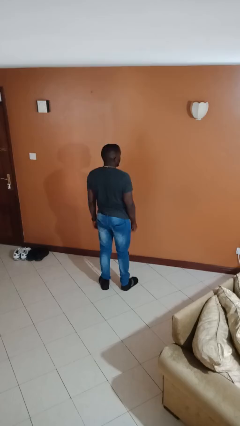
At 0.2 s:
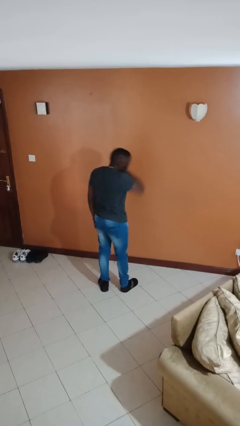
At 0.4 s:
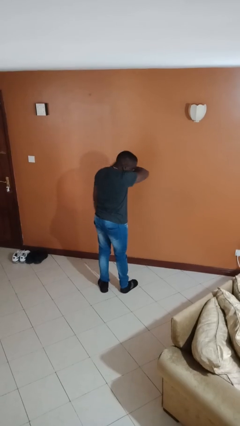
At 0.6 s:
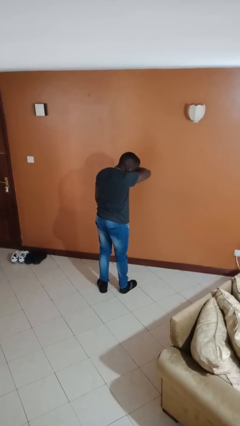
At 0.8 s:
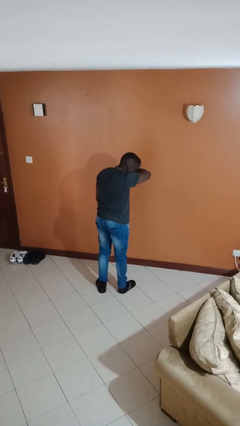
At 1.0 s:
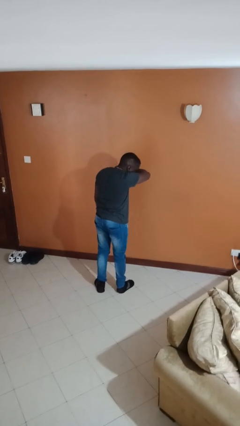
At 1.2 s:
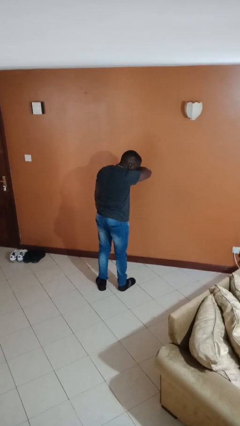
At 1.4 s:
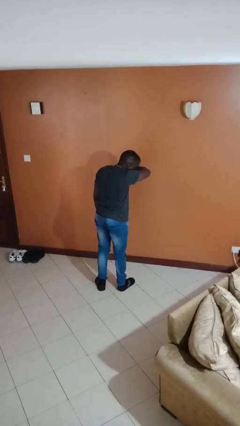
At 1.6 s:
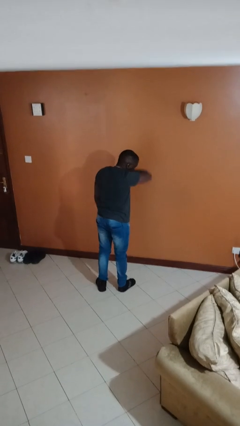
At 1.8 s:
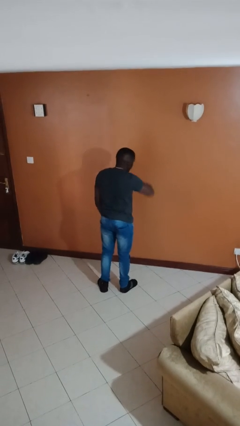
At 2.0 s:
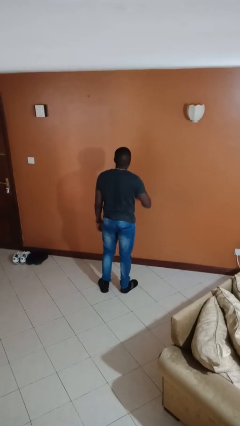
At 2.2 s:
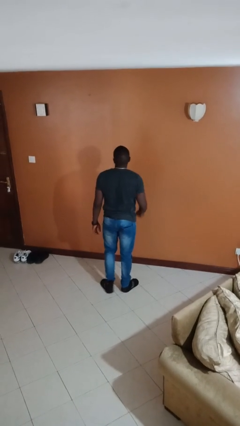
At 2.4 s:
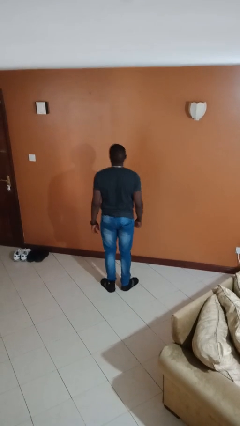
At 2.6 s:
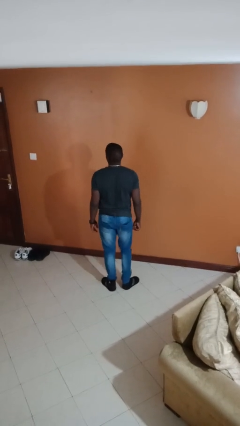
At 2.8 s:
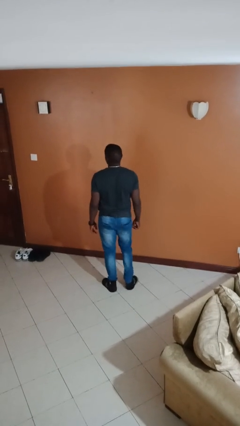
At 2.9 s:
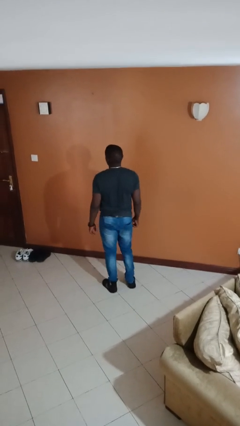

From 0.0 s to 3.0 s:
person sneezes into arm

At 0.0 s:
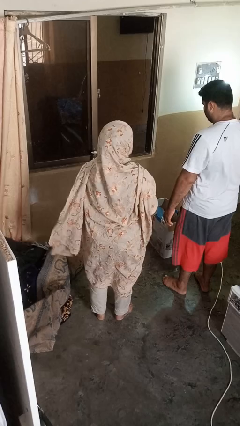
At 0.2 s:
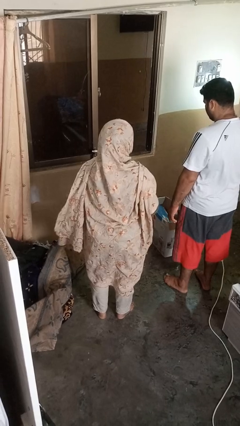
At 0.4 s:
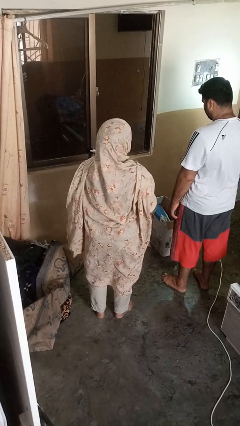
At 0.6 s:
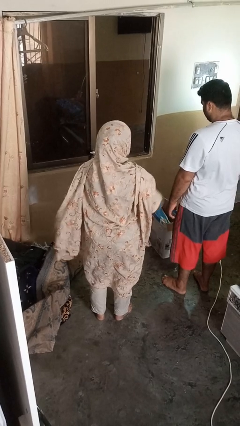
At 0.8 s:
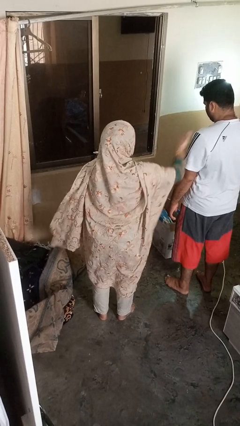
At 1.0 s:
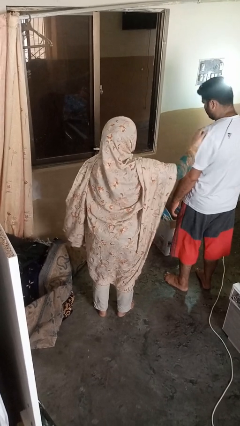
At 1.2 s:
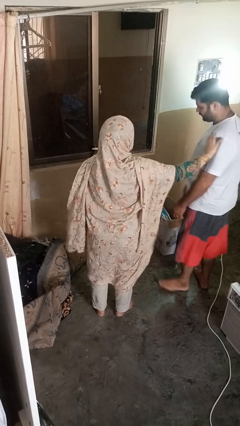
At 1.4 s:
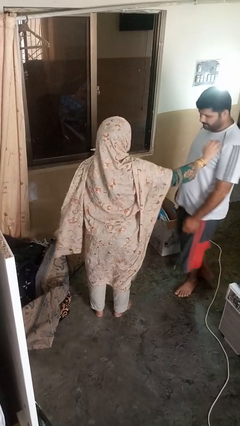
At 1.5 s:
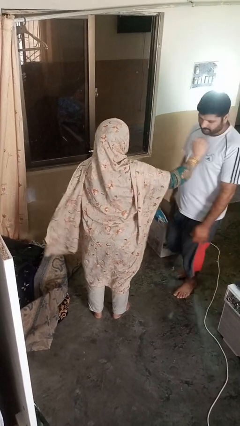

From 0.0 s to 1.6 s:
person grabs person by shoulder

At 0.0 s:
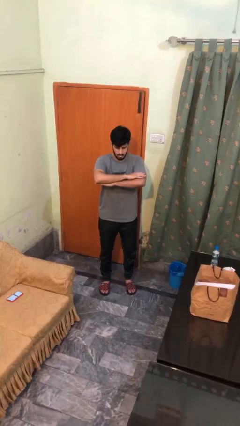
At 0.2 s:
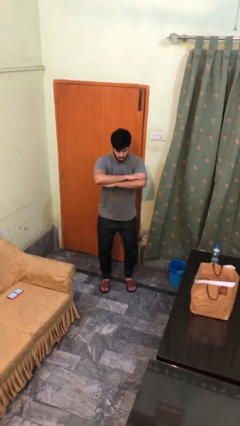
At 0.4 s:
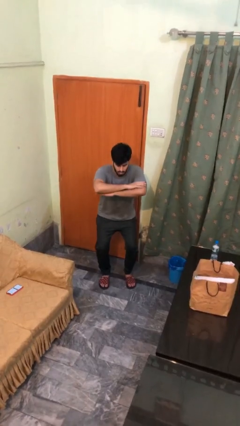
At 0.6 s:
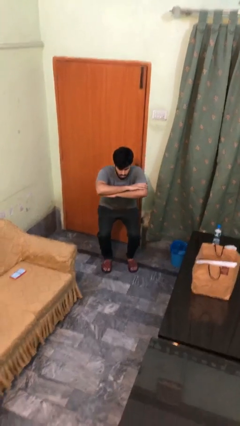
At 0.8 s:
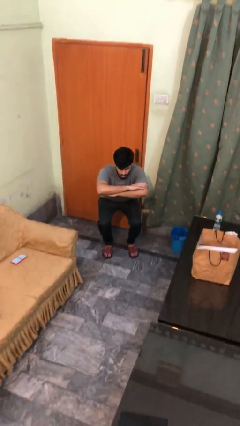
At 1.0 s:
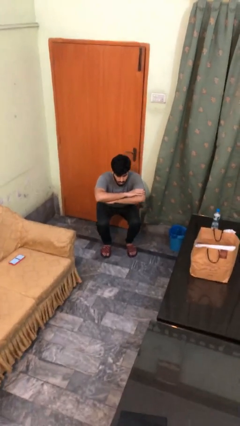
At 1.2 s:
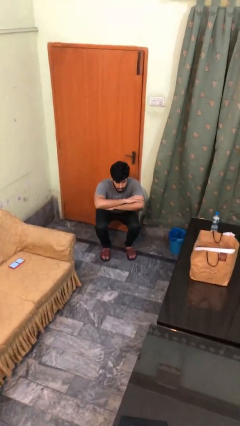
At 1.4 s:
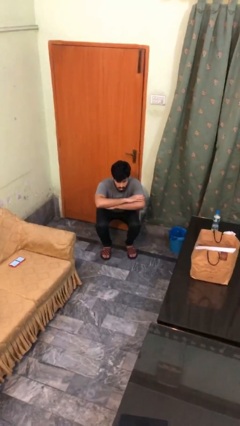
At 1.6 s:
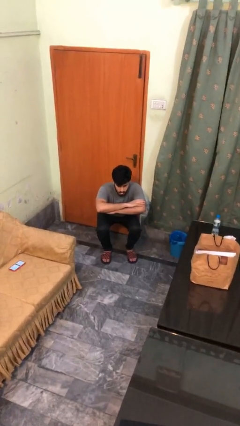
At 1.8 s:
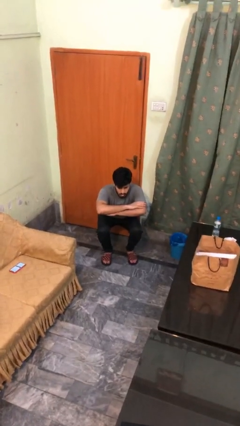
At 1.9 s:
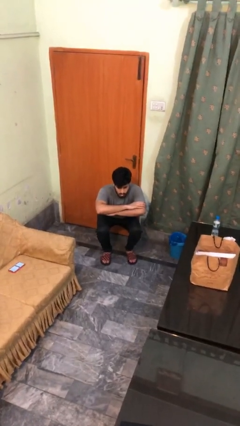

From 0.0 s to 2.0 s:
person squats

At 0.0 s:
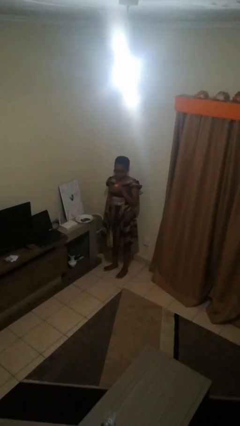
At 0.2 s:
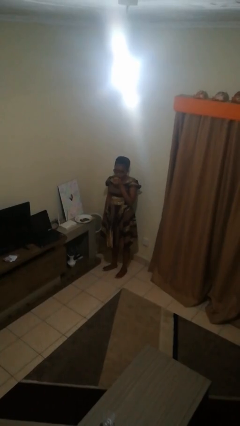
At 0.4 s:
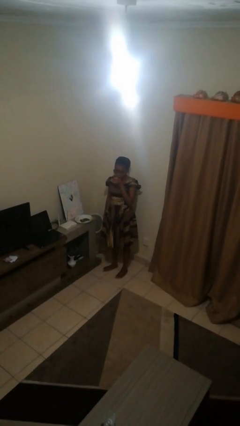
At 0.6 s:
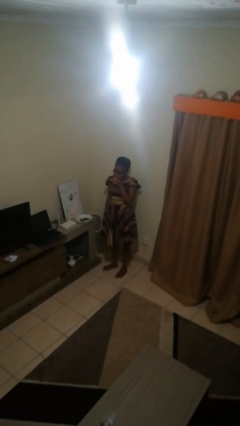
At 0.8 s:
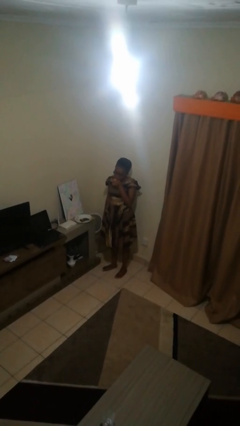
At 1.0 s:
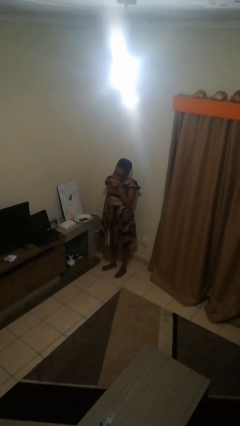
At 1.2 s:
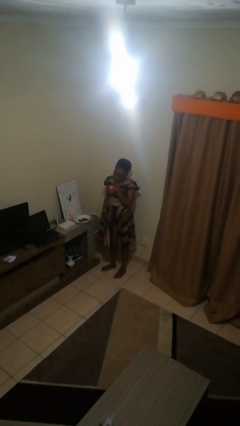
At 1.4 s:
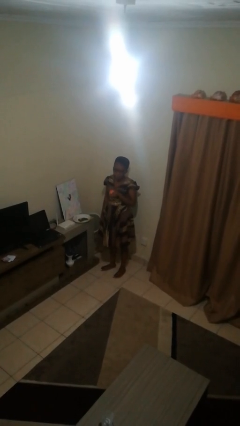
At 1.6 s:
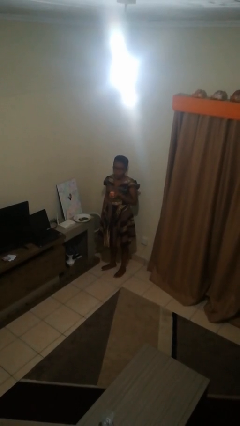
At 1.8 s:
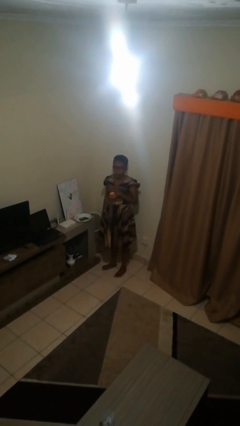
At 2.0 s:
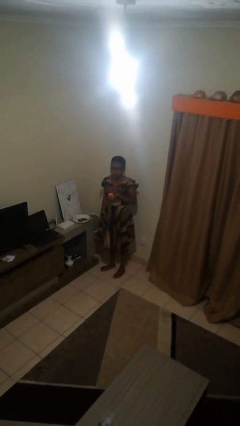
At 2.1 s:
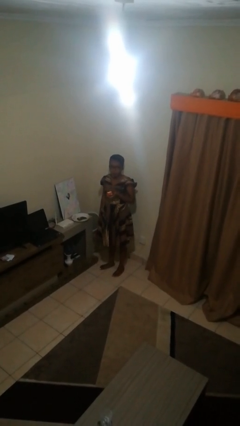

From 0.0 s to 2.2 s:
person eats apple

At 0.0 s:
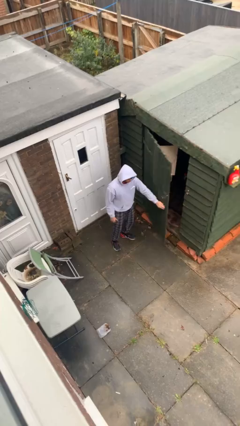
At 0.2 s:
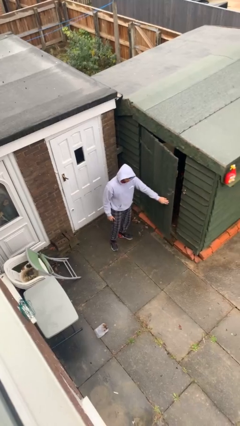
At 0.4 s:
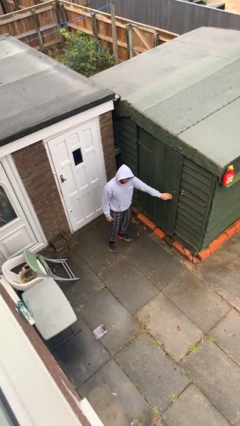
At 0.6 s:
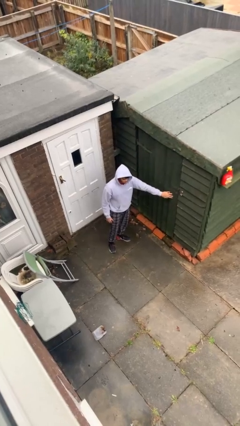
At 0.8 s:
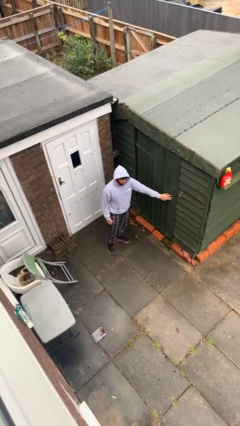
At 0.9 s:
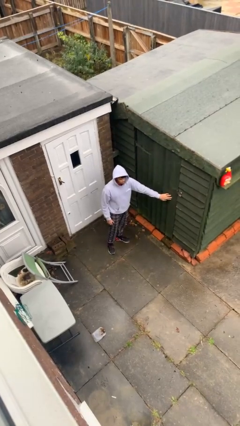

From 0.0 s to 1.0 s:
person closes facility door

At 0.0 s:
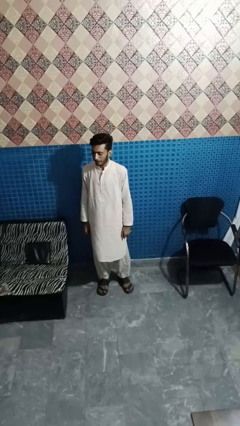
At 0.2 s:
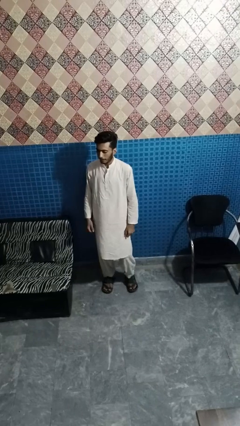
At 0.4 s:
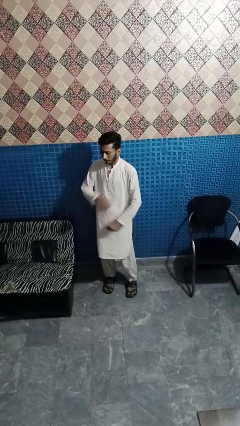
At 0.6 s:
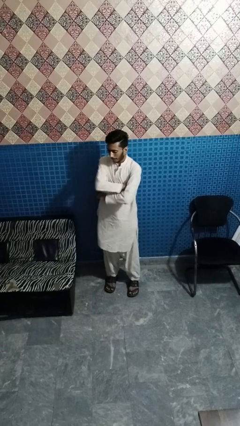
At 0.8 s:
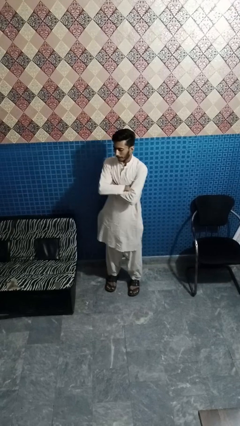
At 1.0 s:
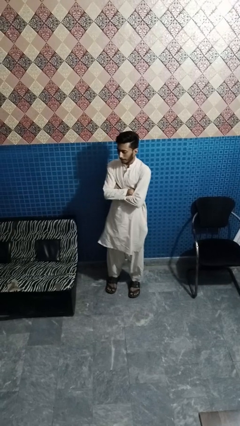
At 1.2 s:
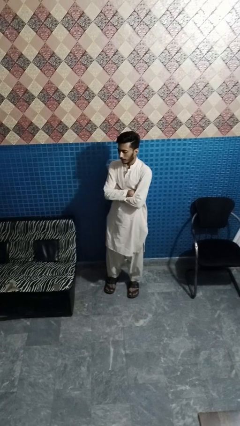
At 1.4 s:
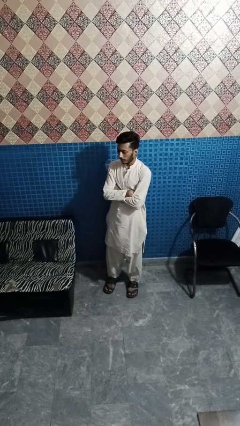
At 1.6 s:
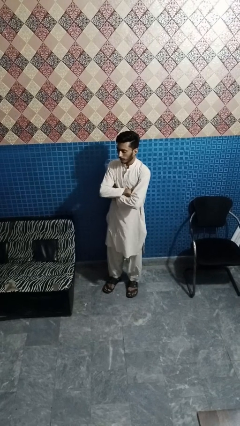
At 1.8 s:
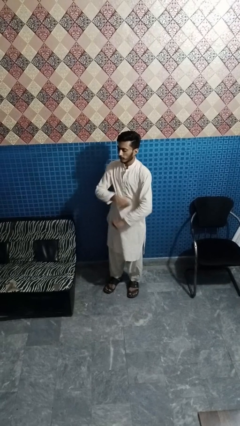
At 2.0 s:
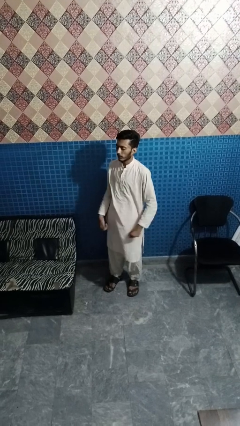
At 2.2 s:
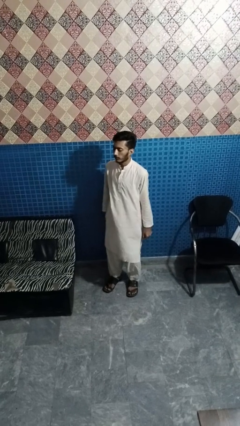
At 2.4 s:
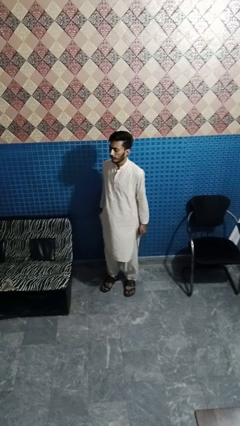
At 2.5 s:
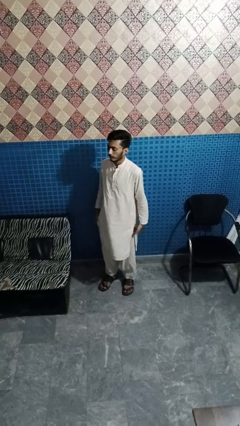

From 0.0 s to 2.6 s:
person crosses arms

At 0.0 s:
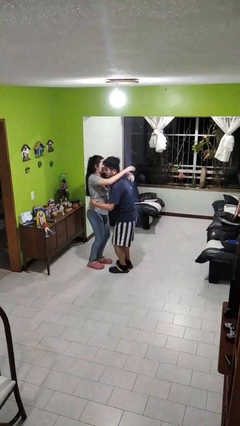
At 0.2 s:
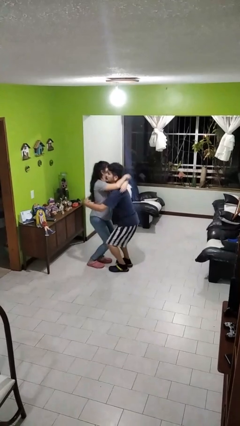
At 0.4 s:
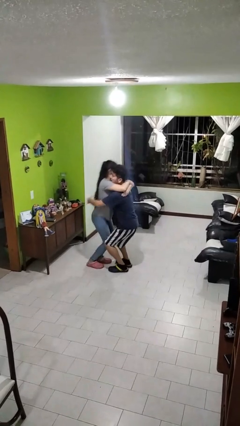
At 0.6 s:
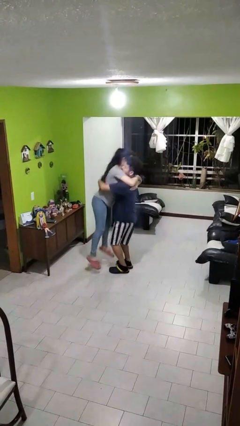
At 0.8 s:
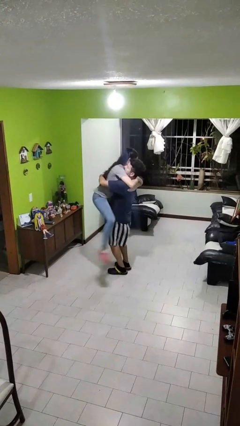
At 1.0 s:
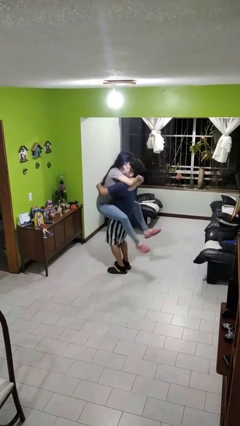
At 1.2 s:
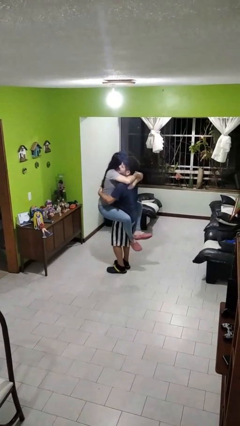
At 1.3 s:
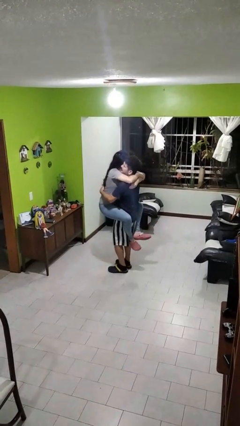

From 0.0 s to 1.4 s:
person picks up person

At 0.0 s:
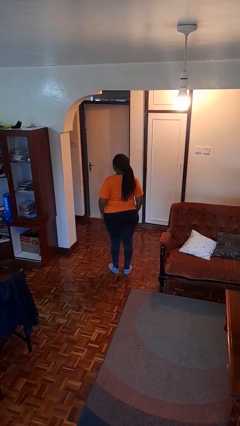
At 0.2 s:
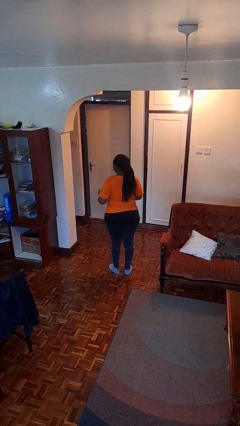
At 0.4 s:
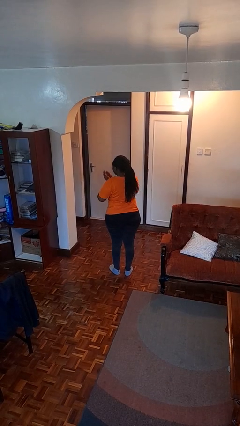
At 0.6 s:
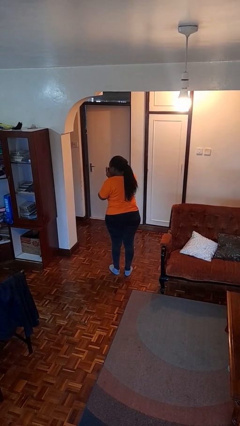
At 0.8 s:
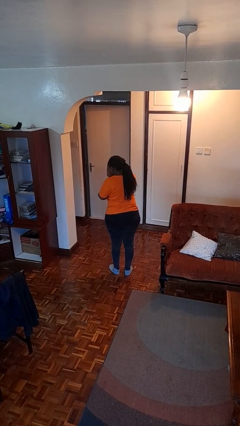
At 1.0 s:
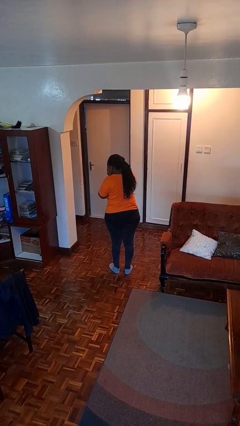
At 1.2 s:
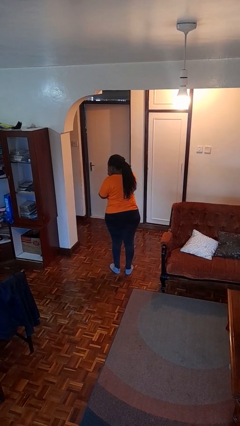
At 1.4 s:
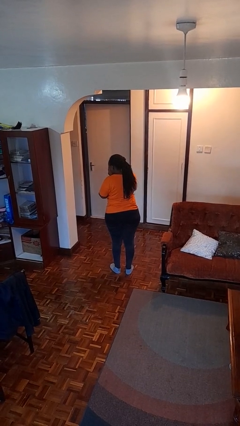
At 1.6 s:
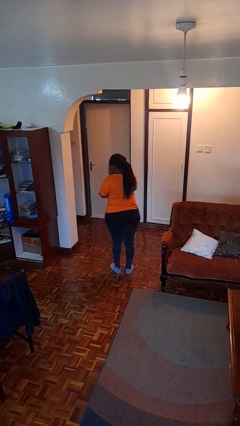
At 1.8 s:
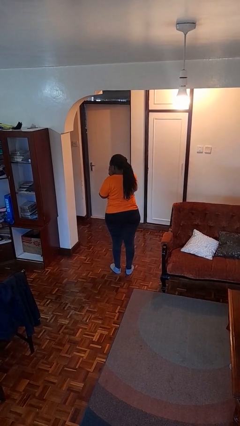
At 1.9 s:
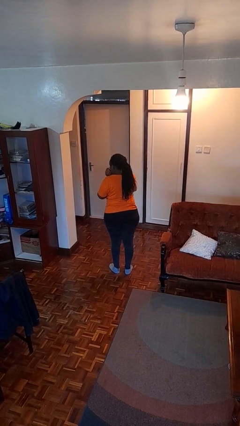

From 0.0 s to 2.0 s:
person sneezes into hand

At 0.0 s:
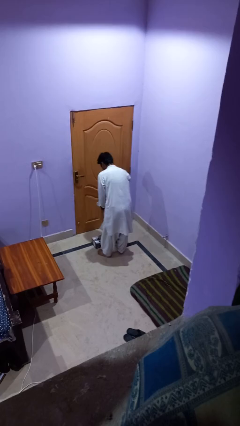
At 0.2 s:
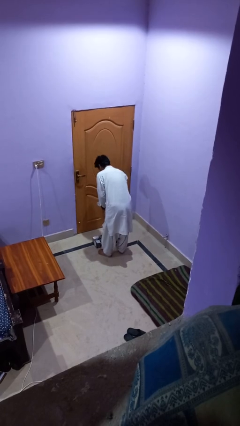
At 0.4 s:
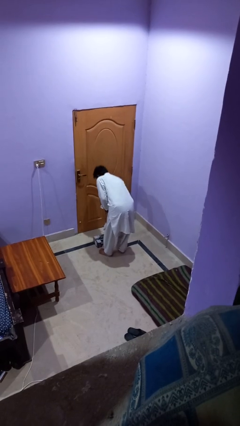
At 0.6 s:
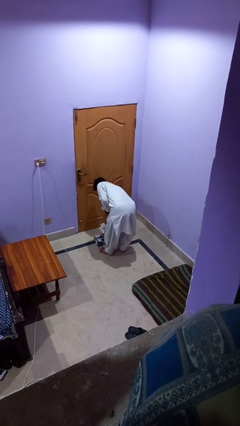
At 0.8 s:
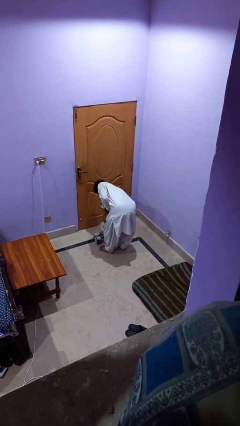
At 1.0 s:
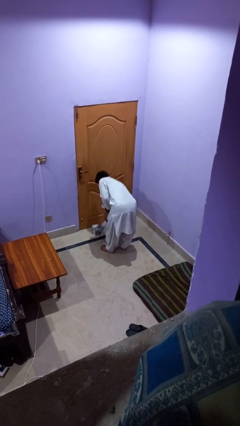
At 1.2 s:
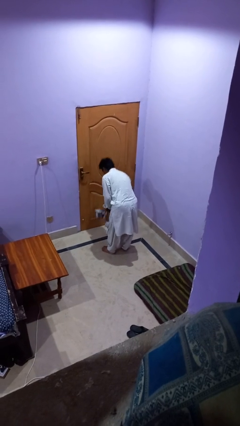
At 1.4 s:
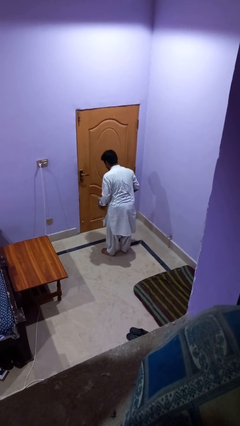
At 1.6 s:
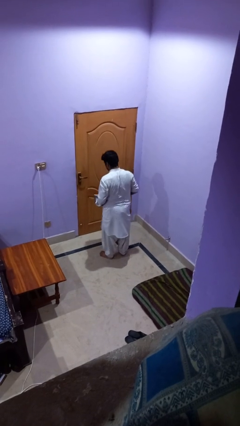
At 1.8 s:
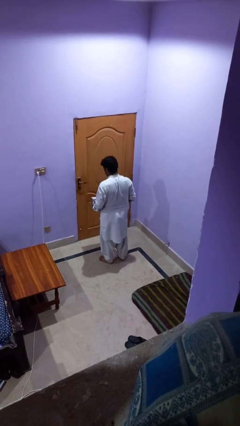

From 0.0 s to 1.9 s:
person picks up object from floor
